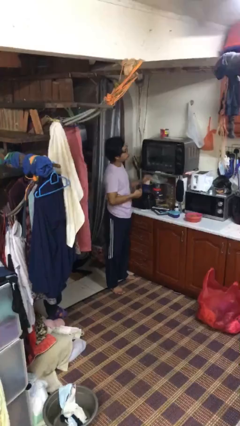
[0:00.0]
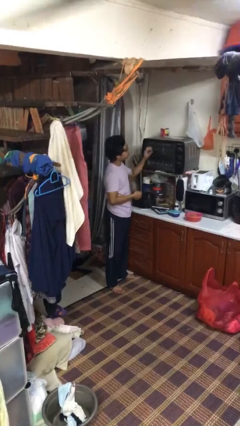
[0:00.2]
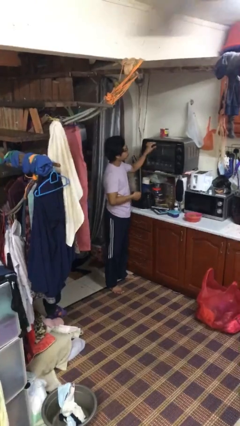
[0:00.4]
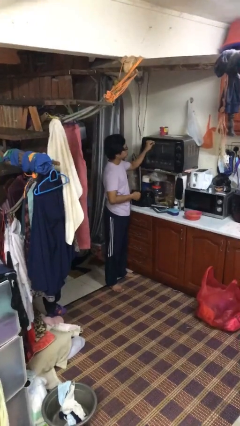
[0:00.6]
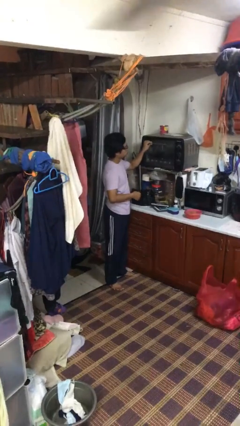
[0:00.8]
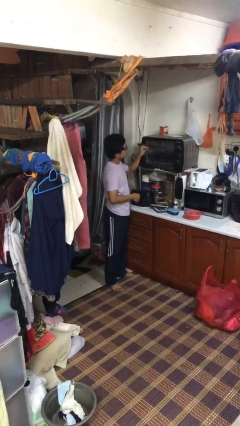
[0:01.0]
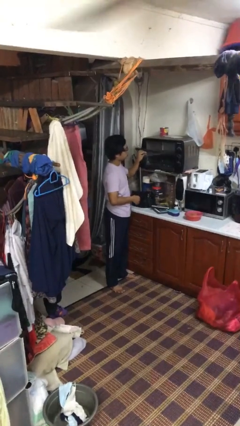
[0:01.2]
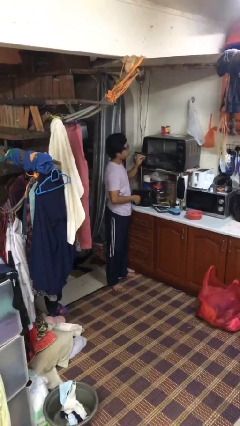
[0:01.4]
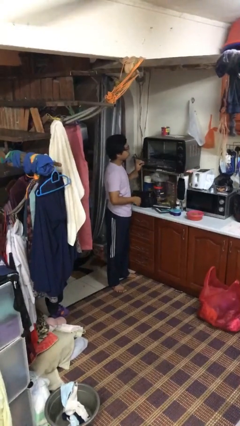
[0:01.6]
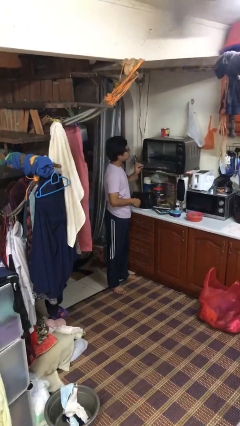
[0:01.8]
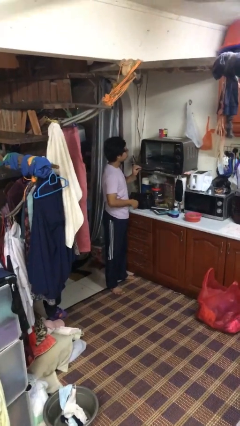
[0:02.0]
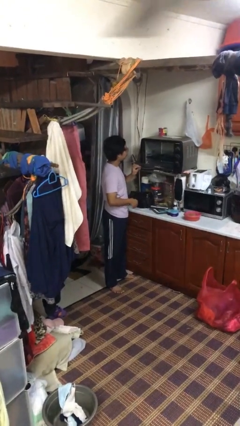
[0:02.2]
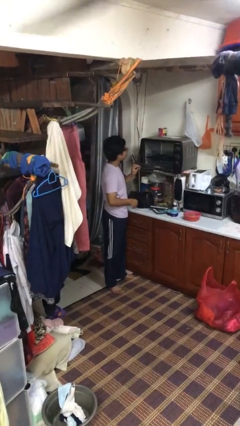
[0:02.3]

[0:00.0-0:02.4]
person opens oven door

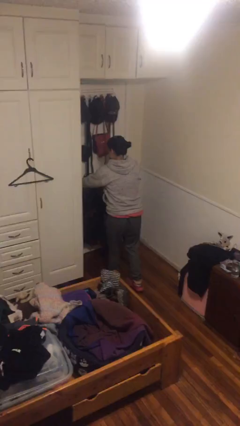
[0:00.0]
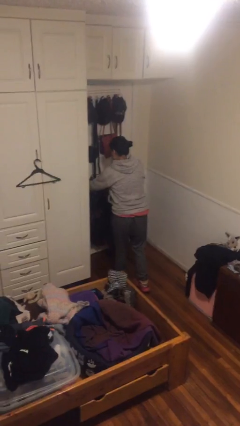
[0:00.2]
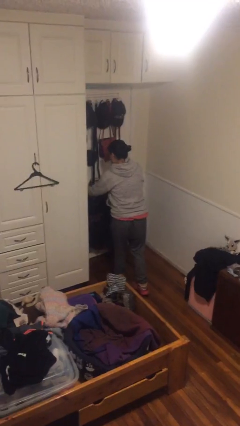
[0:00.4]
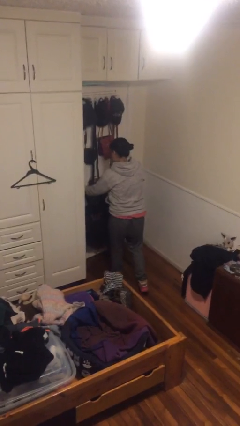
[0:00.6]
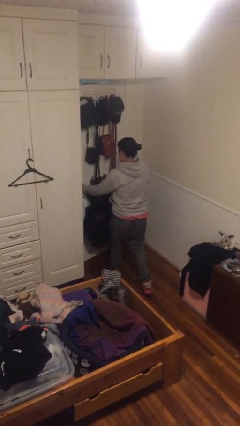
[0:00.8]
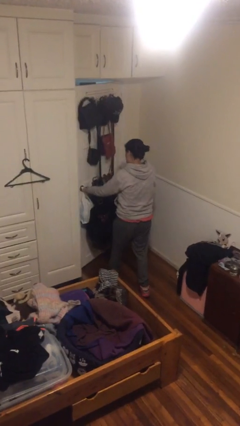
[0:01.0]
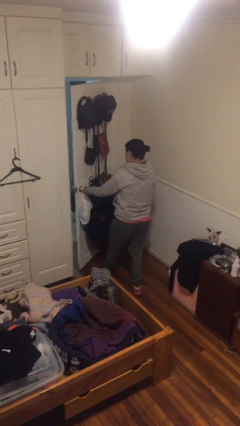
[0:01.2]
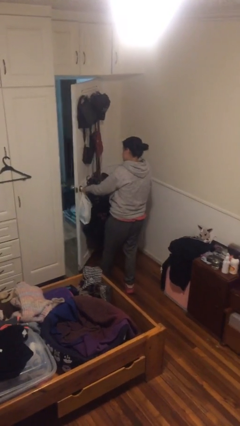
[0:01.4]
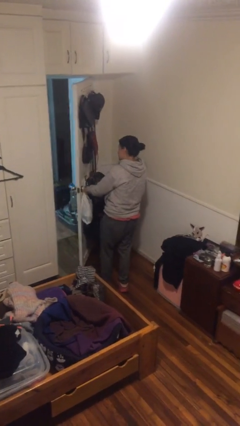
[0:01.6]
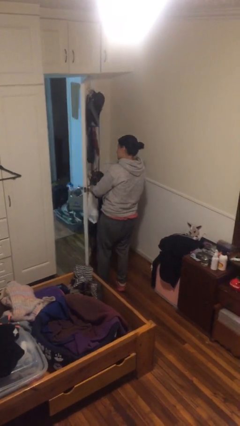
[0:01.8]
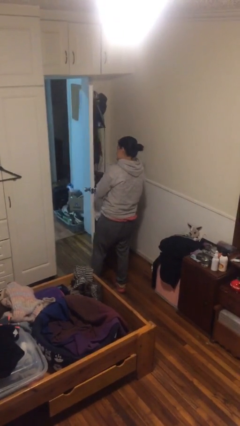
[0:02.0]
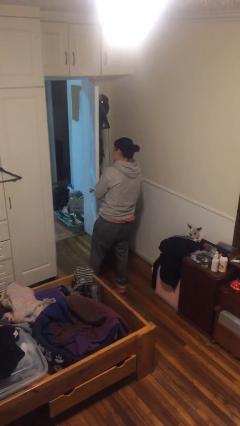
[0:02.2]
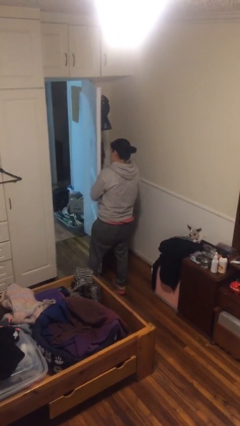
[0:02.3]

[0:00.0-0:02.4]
person opens facility door

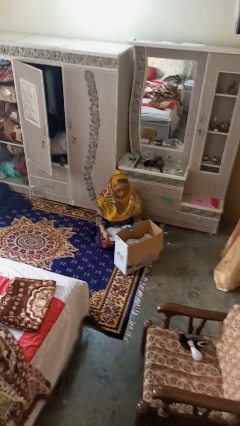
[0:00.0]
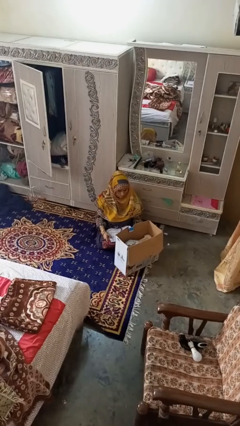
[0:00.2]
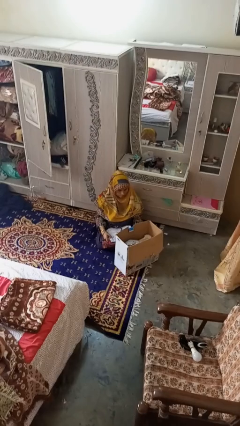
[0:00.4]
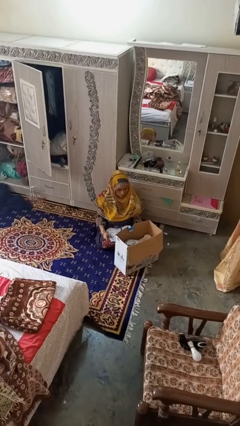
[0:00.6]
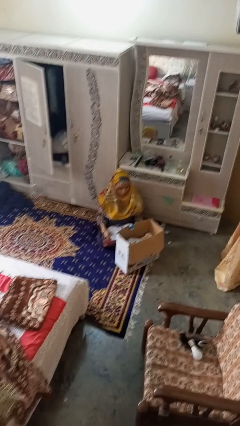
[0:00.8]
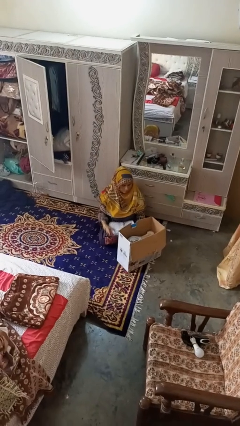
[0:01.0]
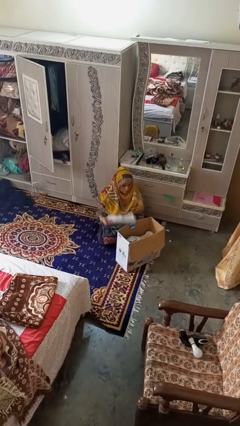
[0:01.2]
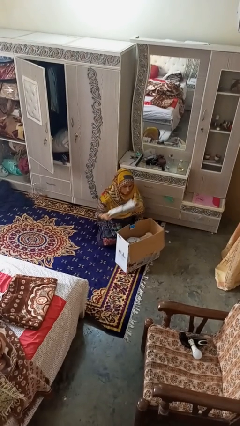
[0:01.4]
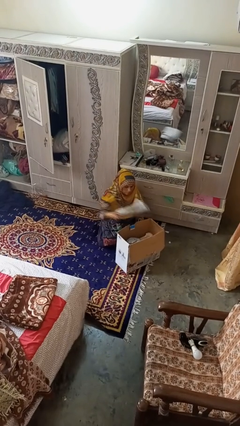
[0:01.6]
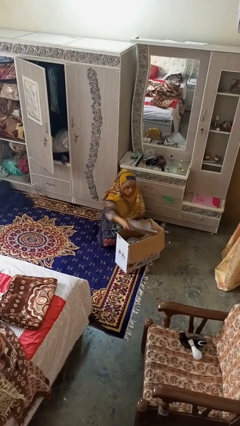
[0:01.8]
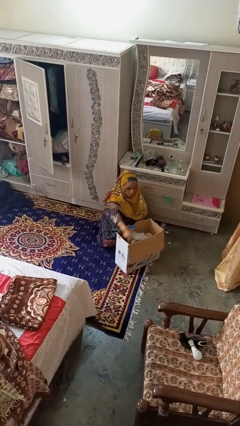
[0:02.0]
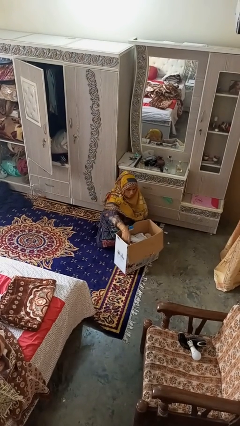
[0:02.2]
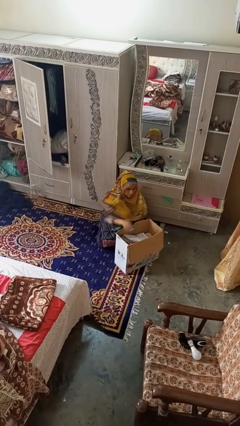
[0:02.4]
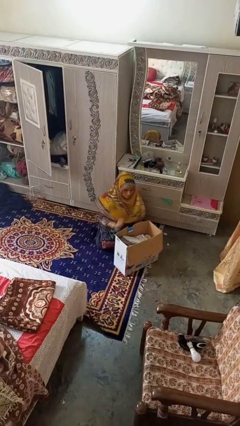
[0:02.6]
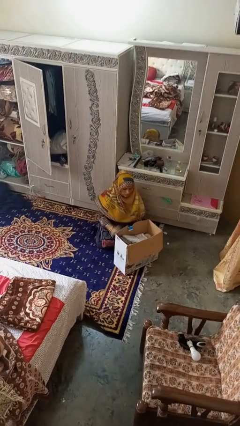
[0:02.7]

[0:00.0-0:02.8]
person puts object into box

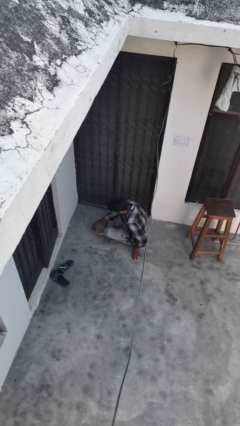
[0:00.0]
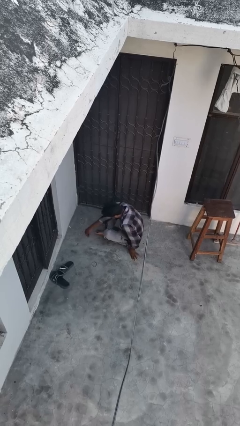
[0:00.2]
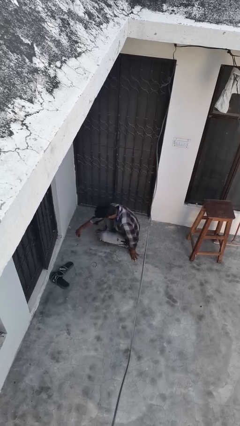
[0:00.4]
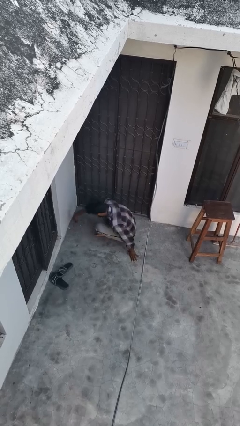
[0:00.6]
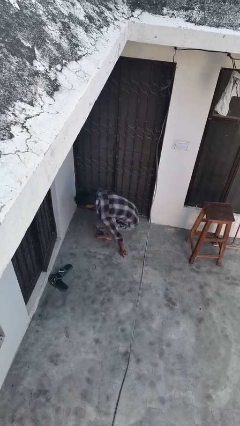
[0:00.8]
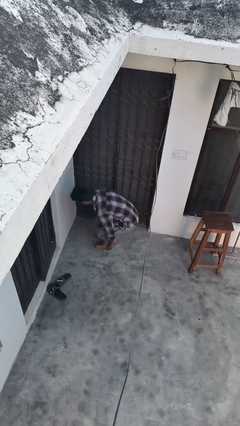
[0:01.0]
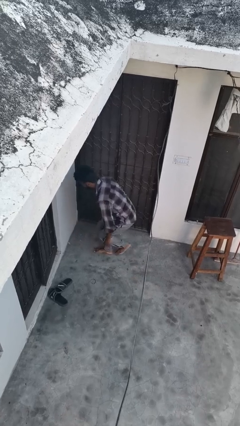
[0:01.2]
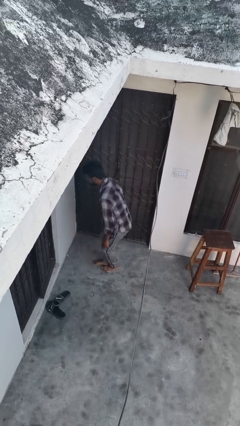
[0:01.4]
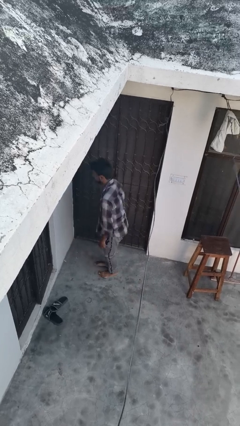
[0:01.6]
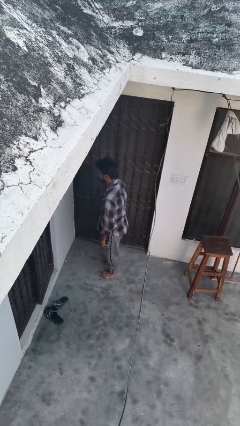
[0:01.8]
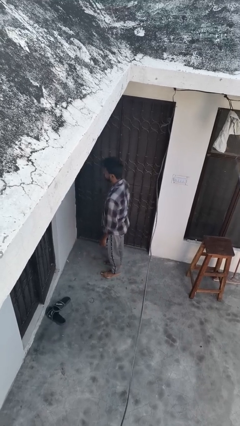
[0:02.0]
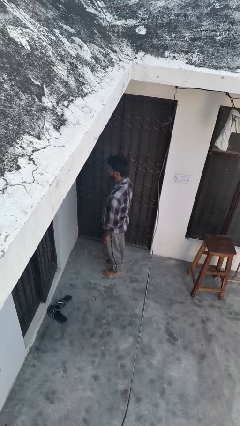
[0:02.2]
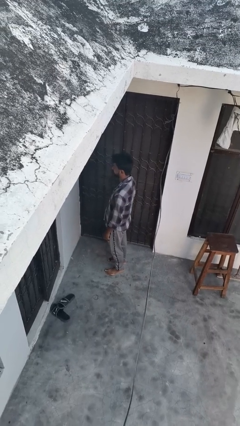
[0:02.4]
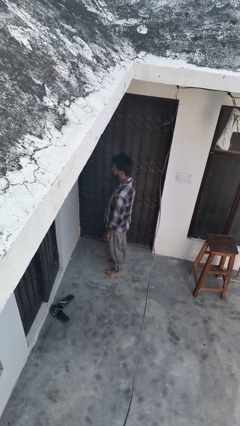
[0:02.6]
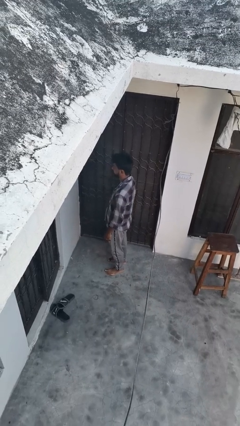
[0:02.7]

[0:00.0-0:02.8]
person stands up from floor

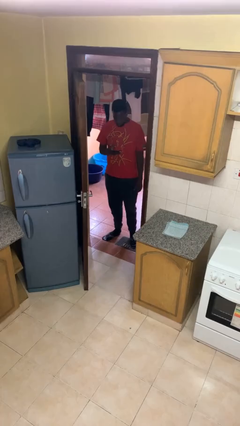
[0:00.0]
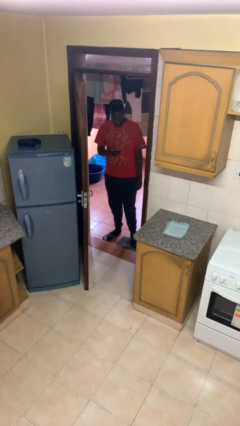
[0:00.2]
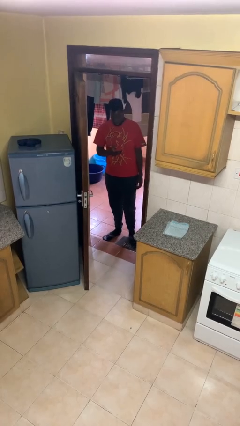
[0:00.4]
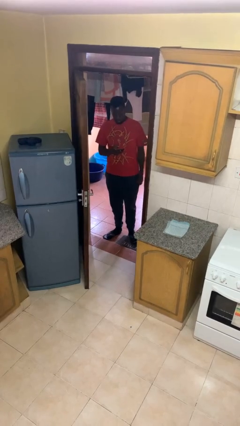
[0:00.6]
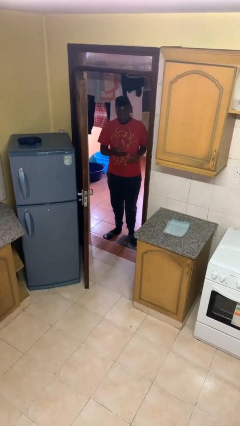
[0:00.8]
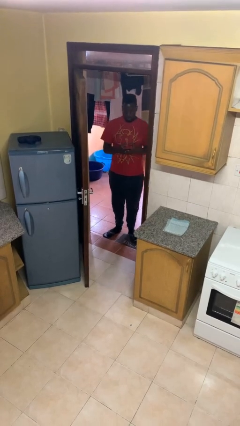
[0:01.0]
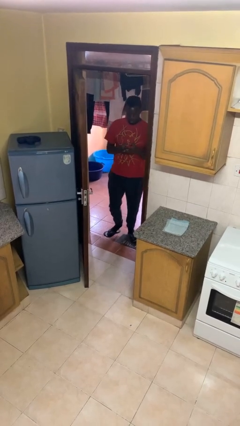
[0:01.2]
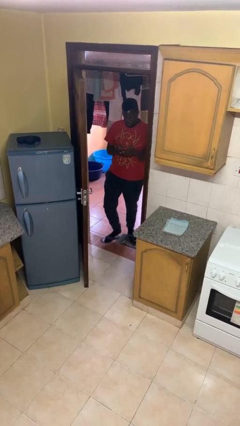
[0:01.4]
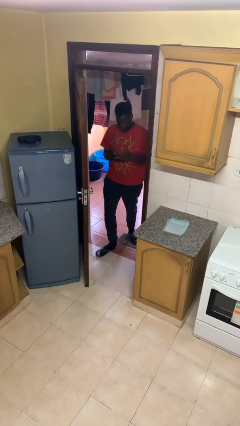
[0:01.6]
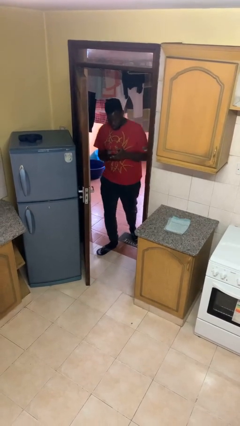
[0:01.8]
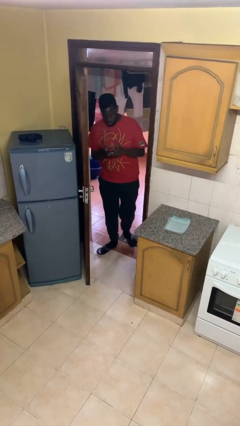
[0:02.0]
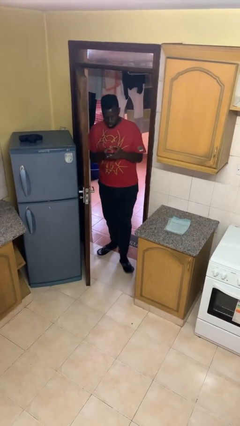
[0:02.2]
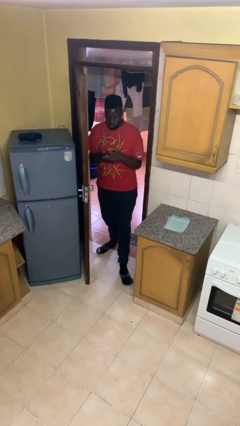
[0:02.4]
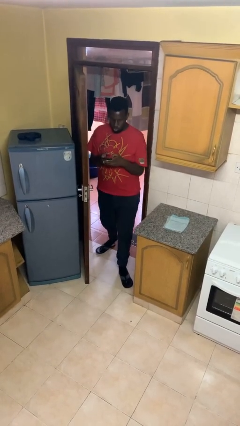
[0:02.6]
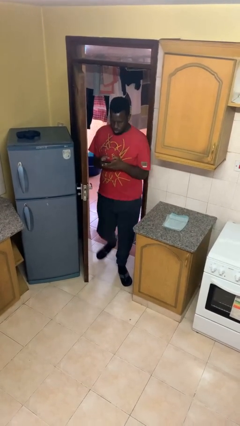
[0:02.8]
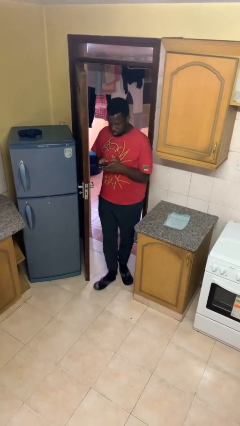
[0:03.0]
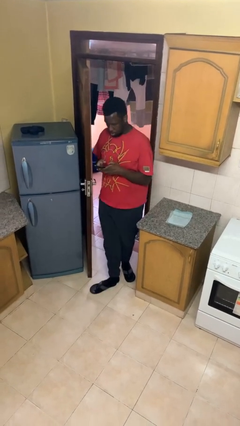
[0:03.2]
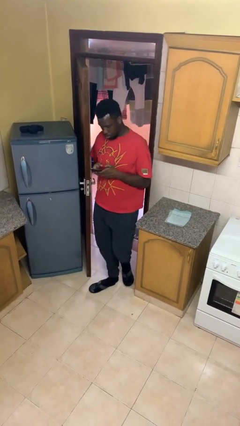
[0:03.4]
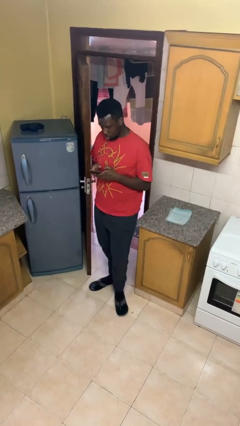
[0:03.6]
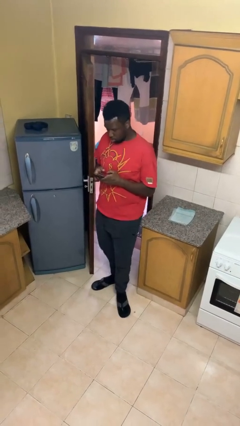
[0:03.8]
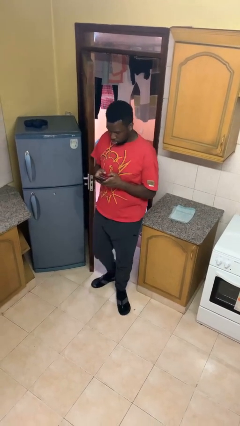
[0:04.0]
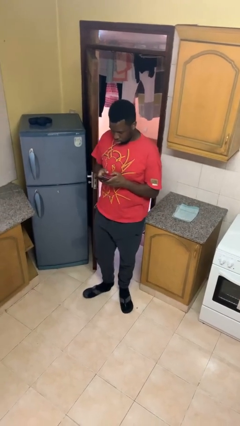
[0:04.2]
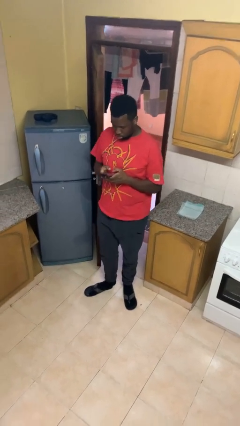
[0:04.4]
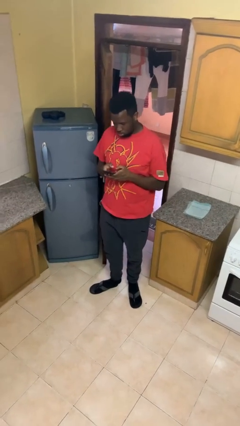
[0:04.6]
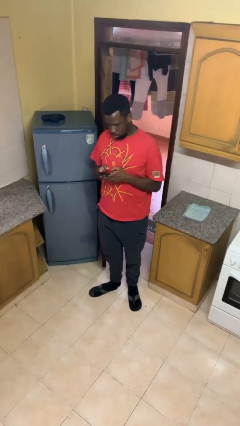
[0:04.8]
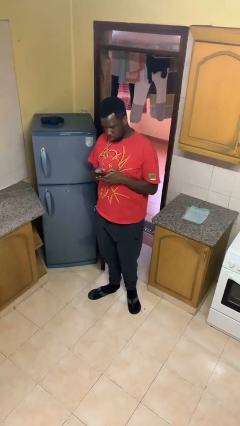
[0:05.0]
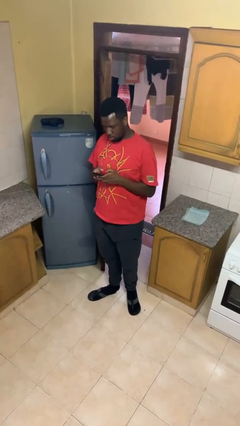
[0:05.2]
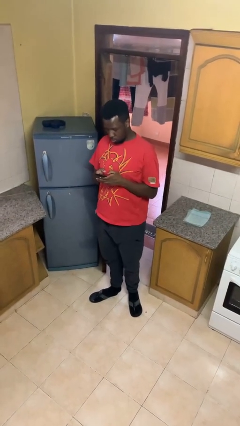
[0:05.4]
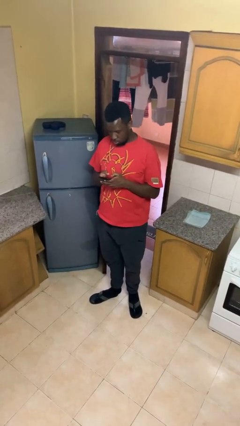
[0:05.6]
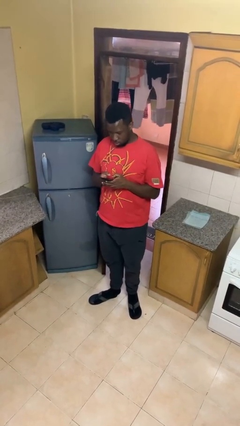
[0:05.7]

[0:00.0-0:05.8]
person enters scene through structure

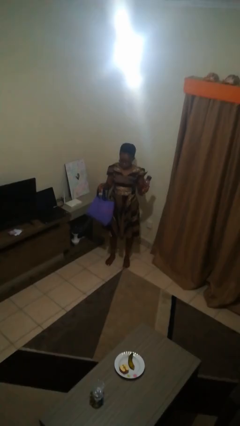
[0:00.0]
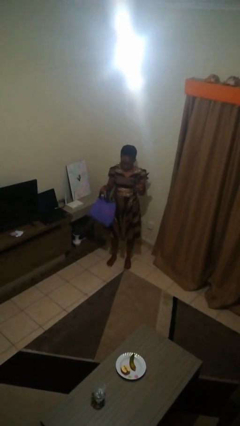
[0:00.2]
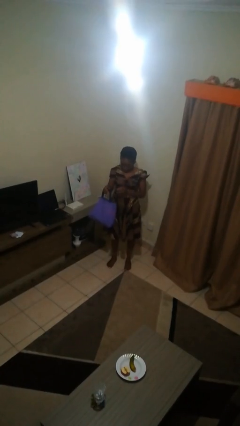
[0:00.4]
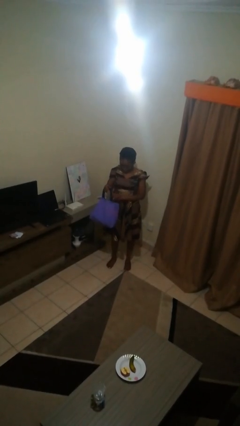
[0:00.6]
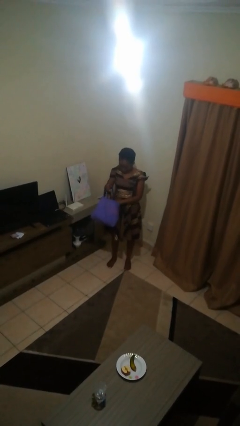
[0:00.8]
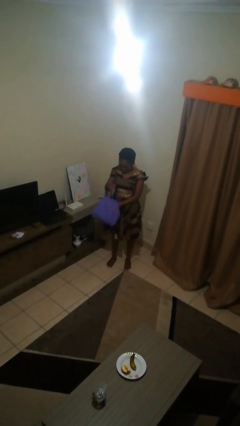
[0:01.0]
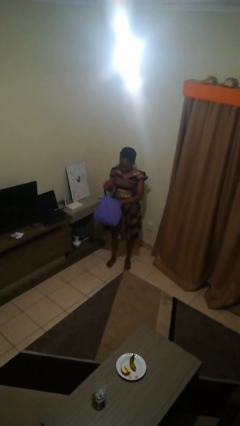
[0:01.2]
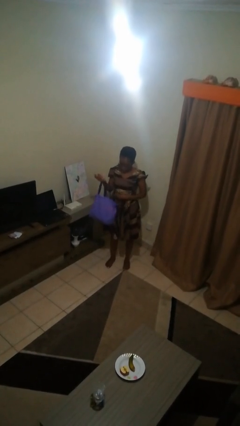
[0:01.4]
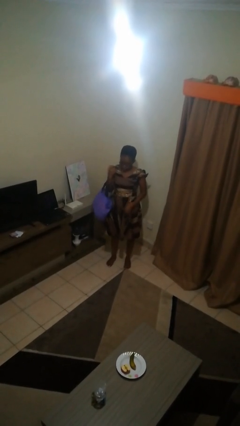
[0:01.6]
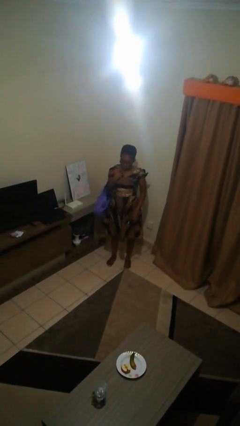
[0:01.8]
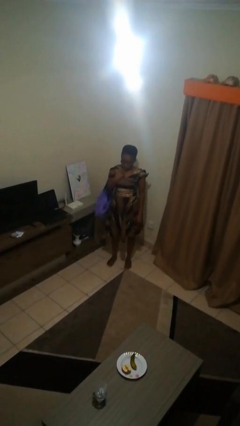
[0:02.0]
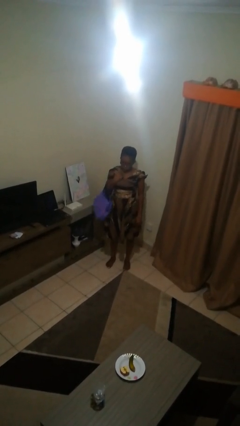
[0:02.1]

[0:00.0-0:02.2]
person puts object into bag
